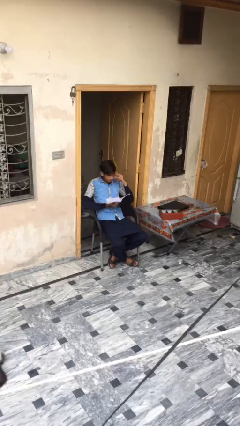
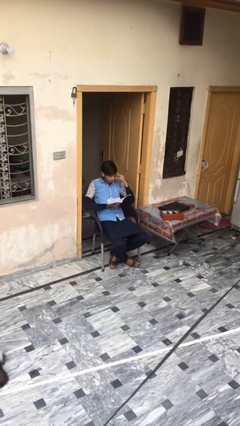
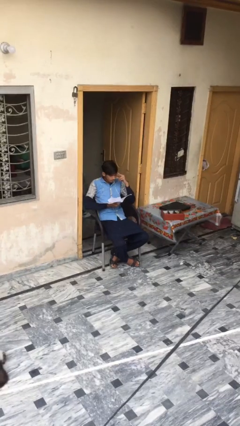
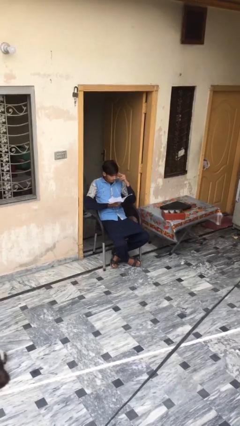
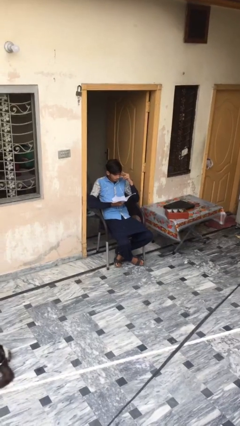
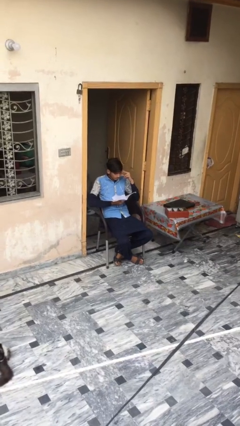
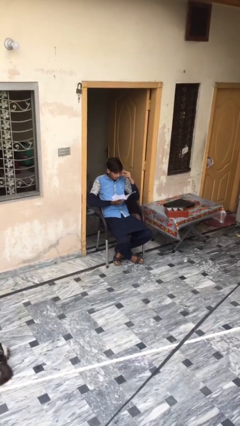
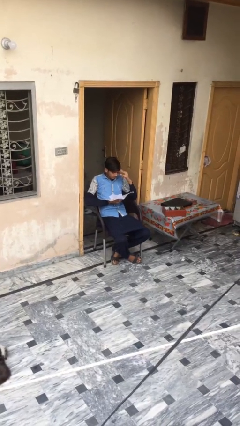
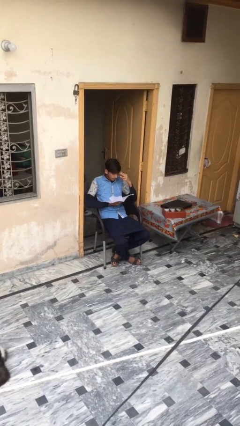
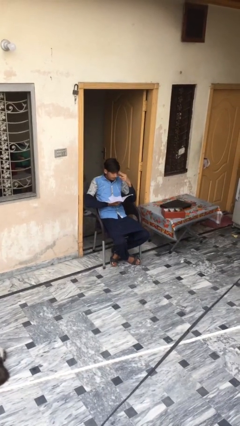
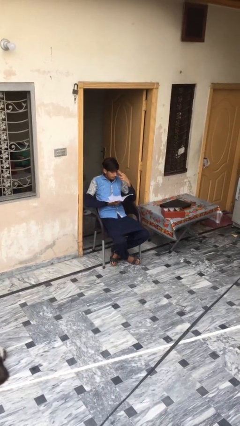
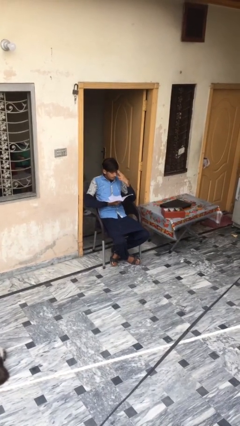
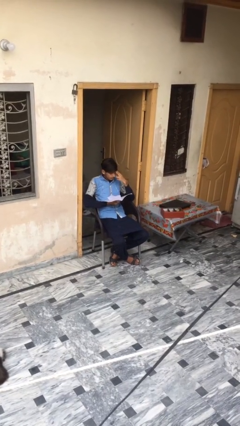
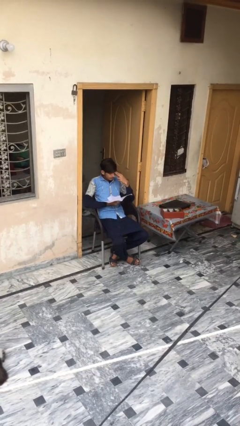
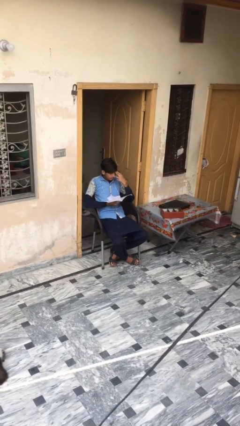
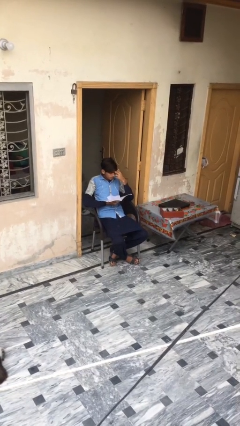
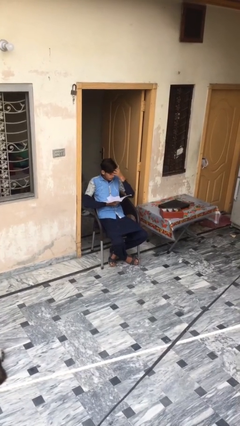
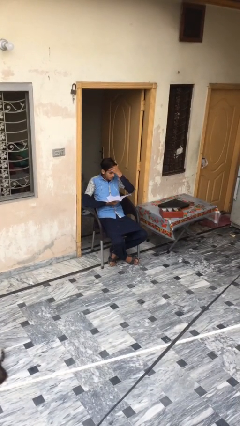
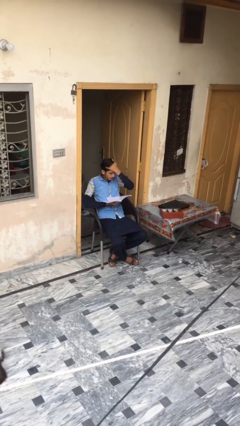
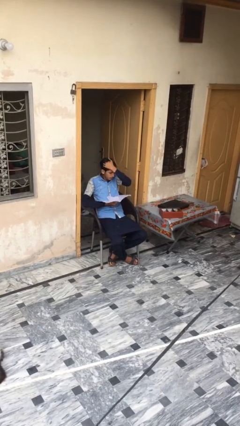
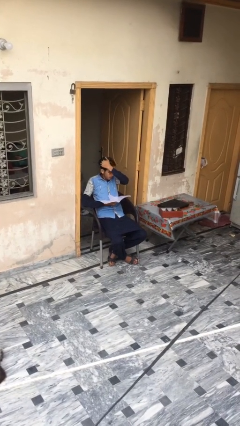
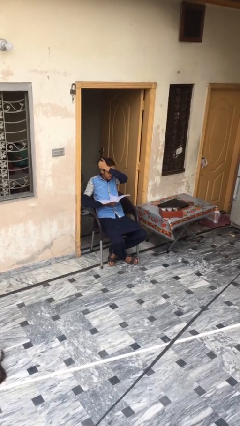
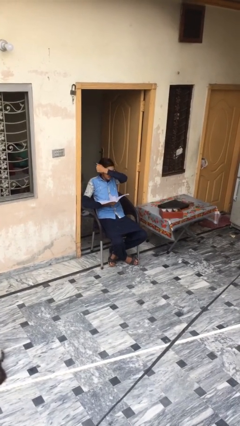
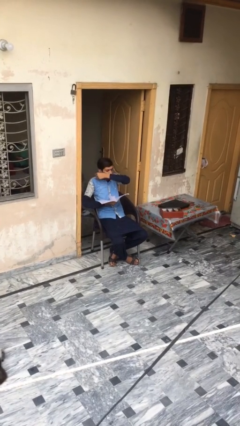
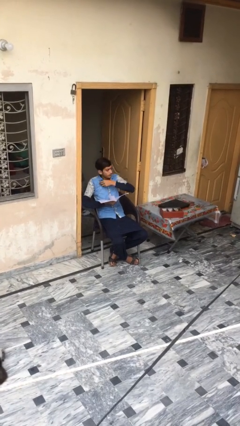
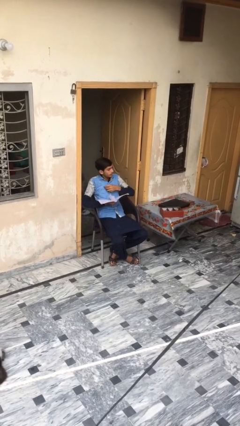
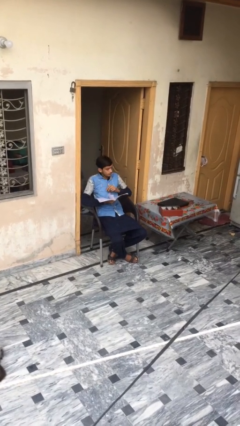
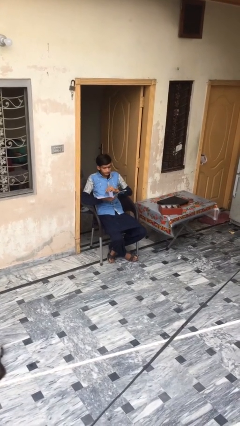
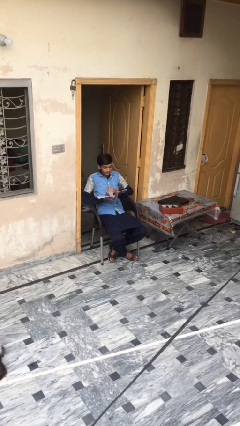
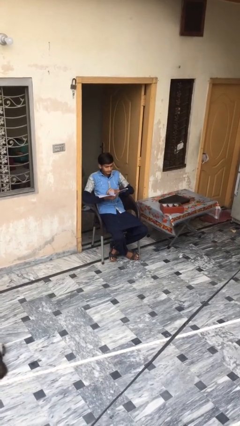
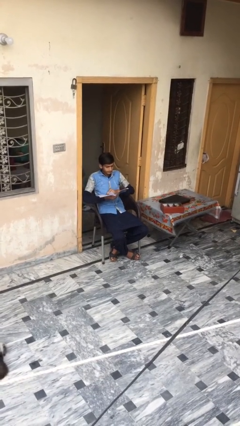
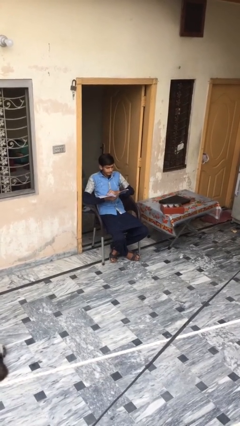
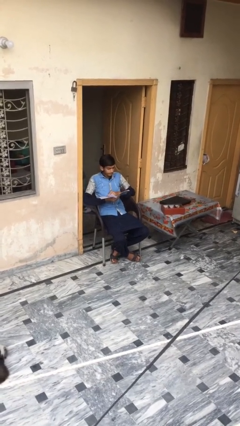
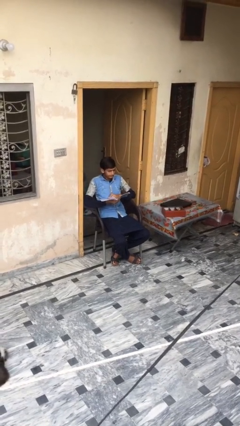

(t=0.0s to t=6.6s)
person reads document

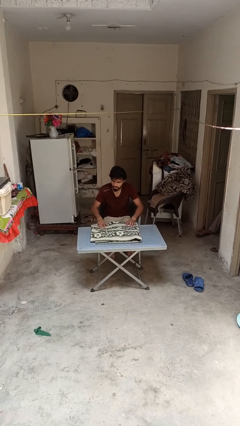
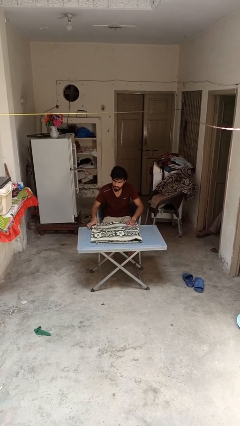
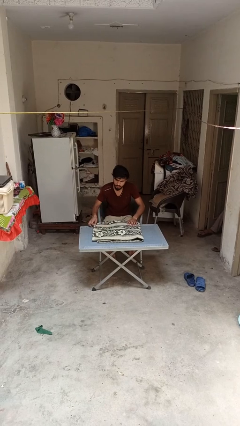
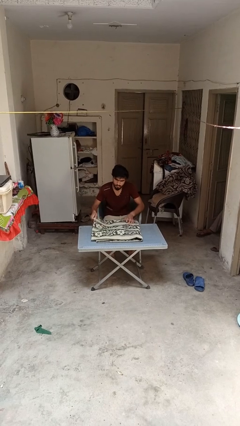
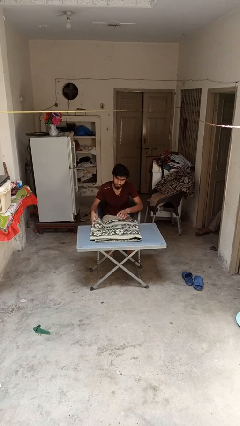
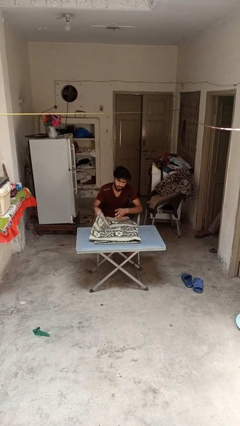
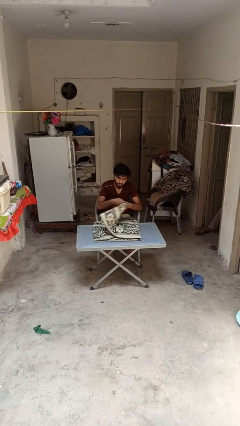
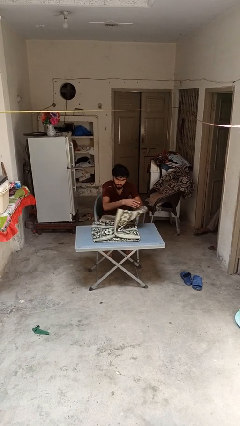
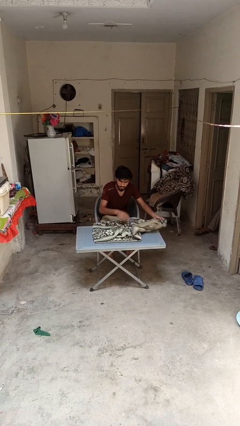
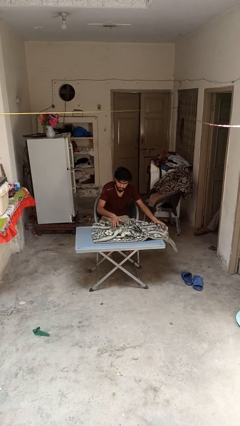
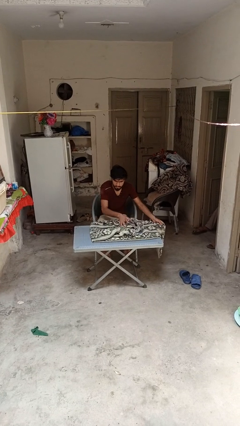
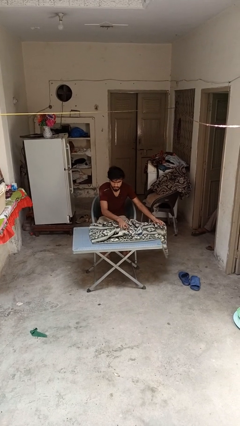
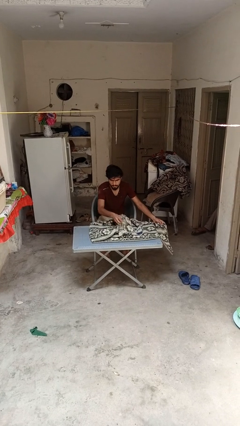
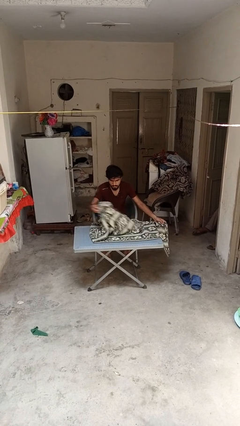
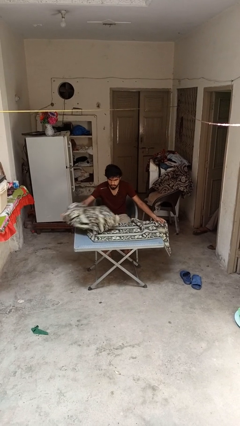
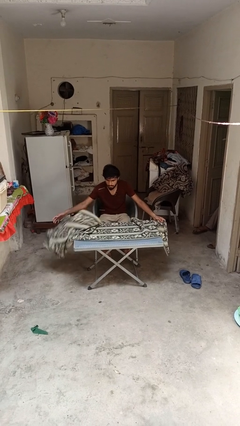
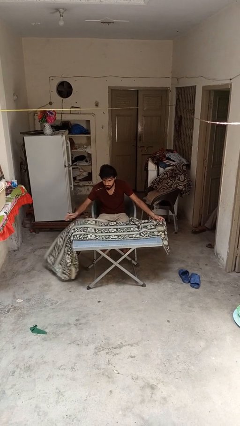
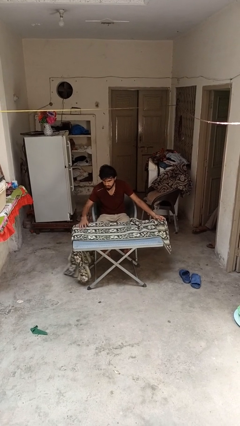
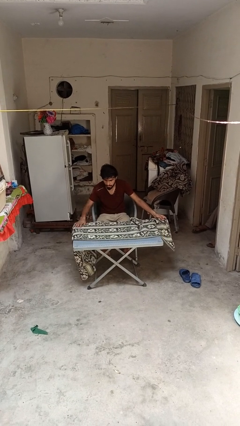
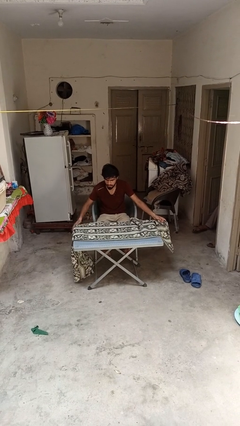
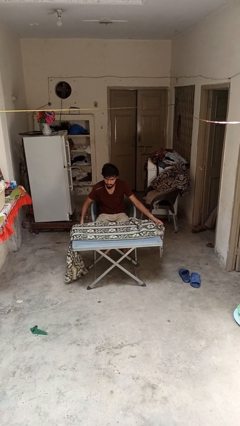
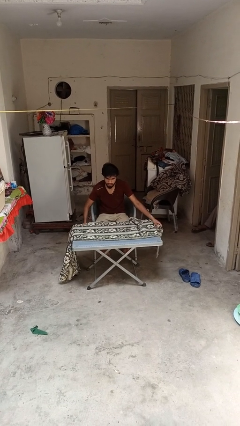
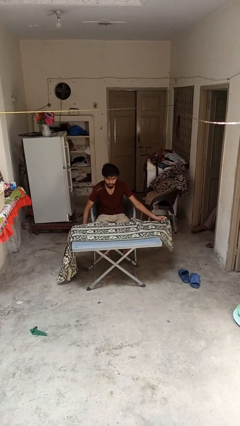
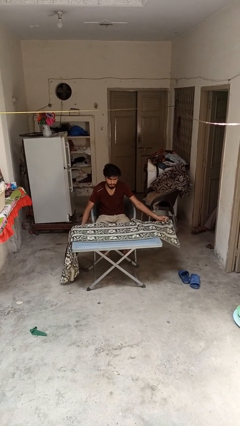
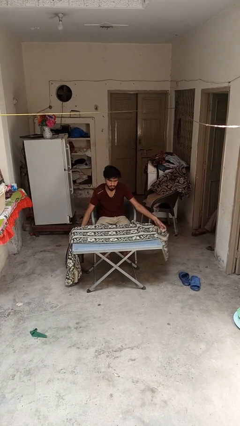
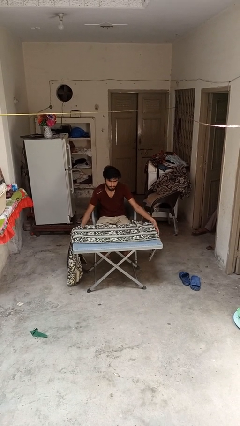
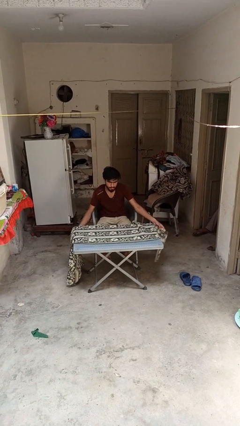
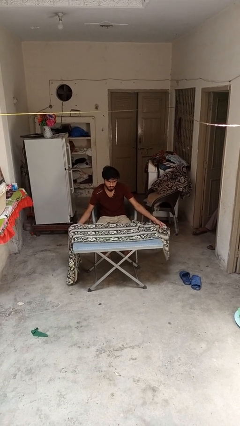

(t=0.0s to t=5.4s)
person spreads tablecloth

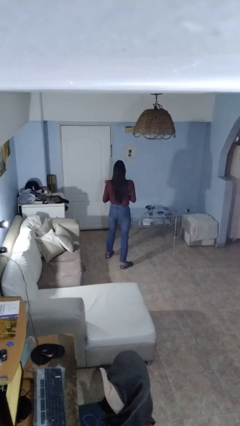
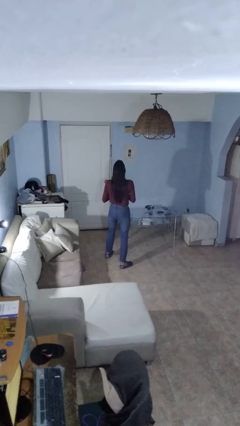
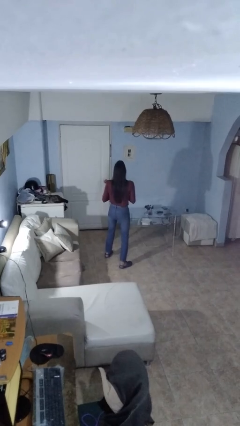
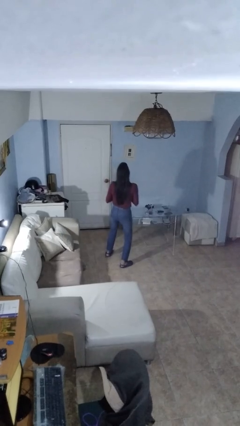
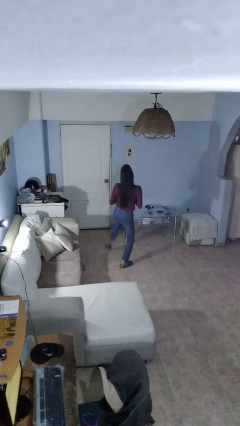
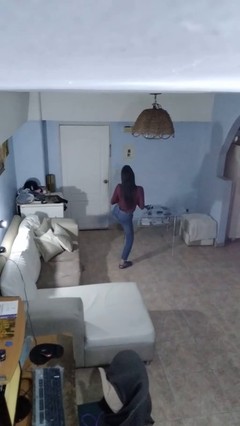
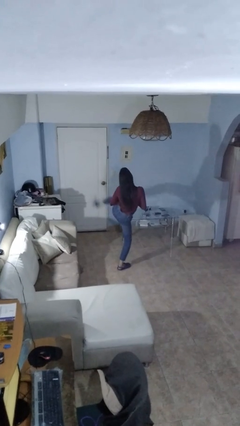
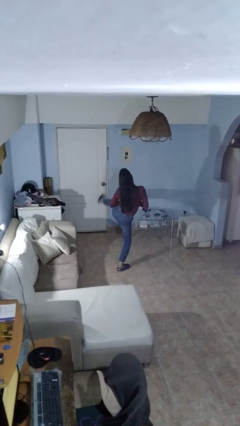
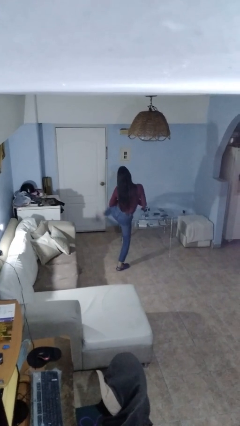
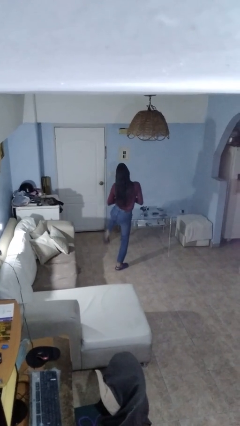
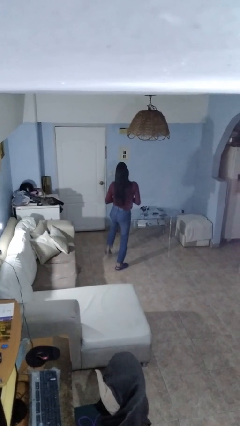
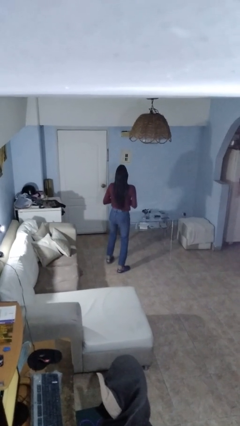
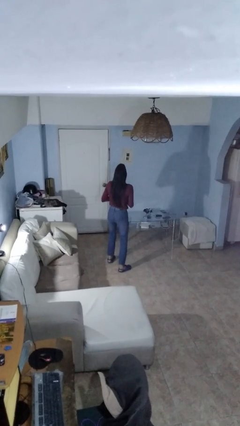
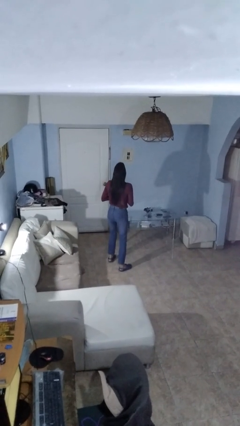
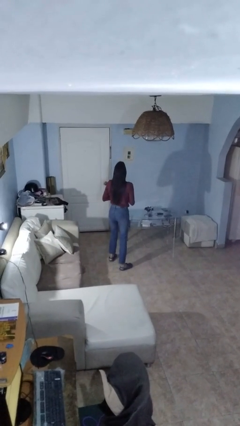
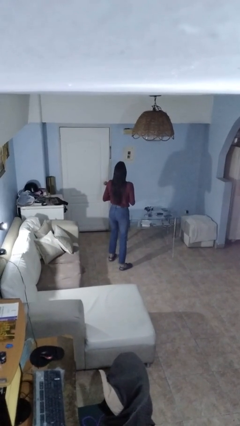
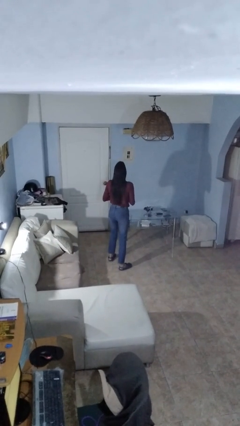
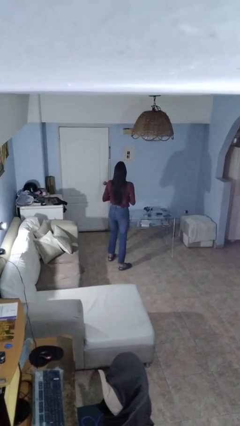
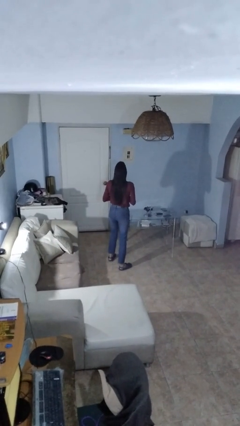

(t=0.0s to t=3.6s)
person karate kicks

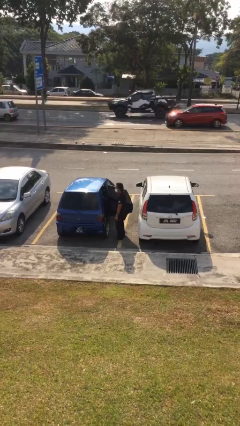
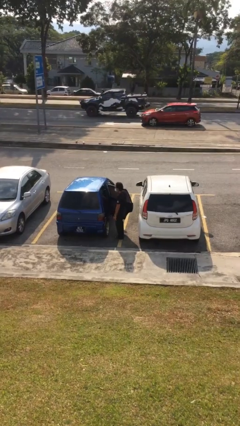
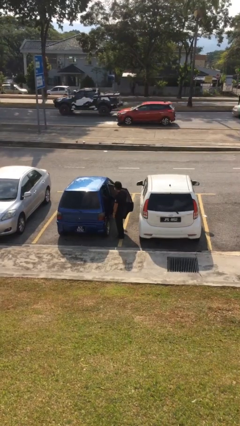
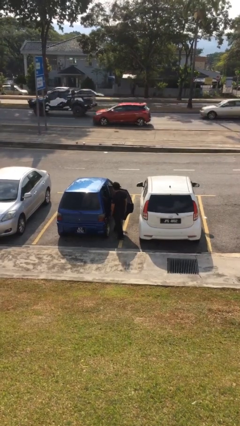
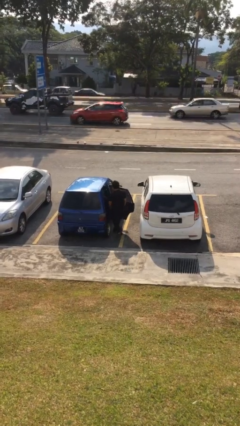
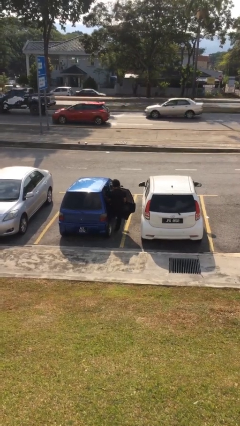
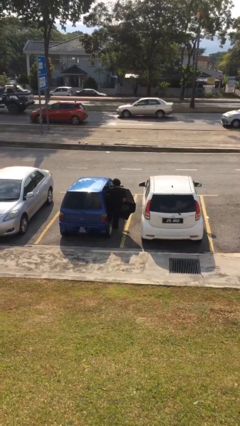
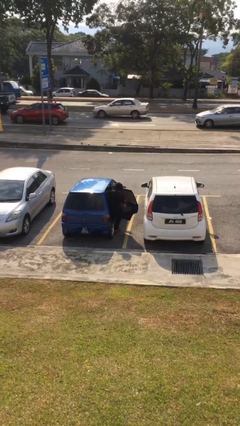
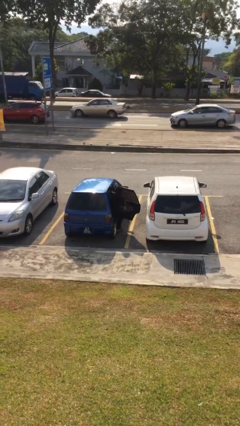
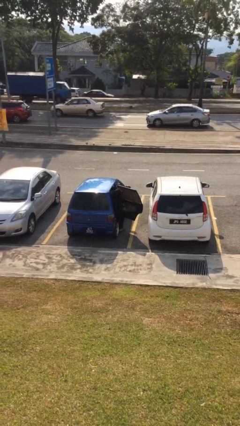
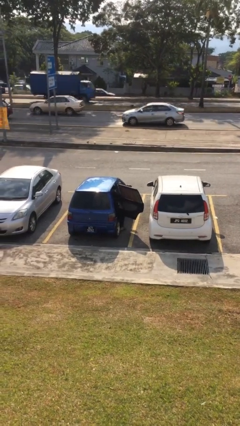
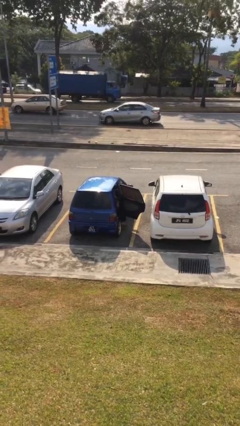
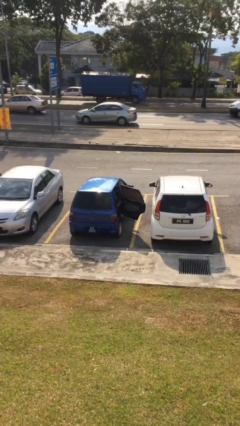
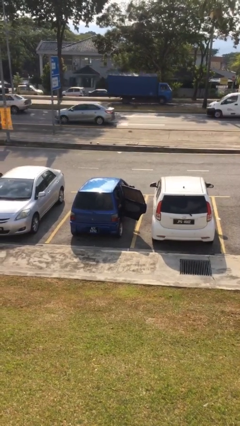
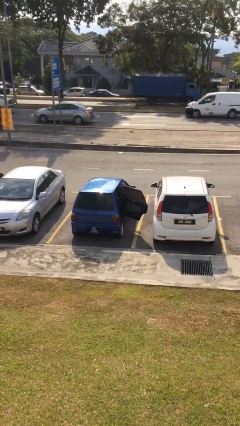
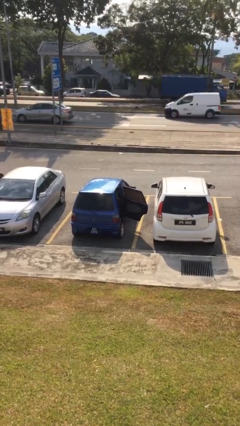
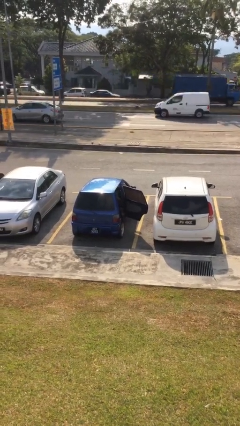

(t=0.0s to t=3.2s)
person enters car
